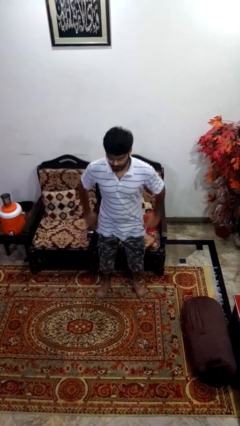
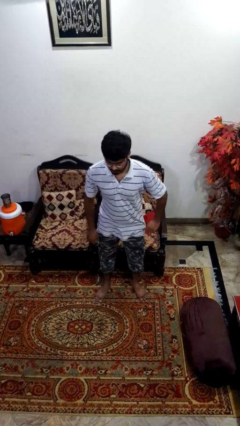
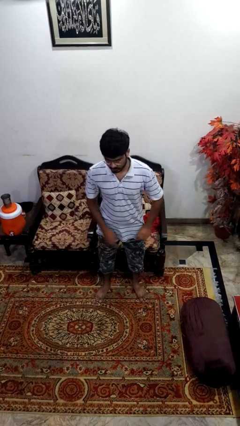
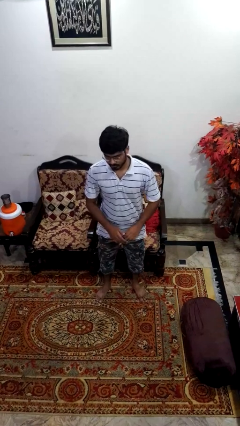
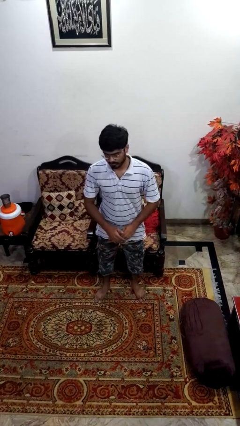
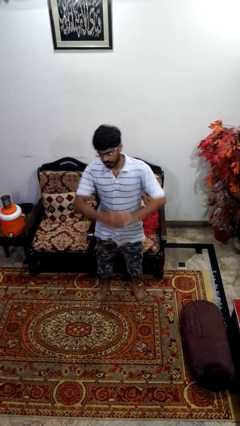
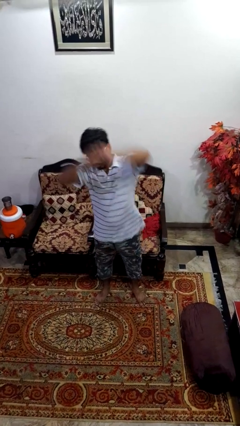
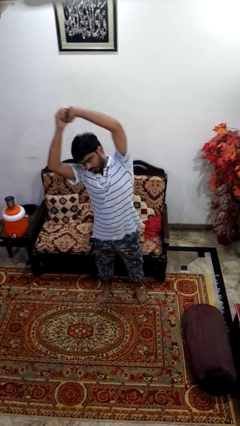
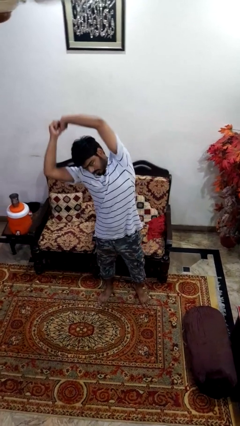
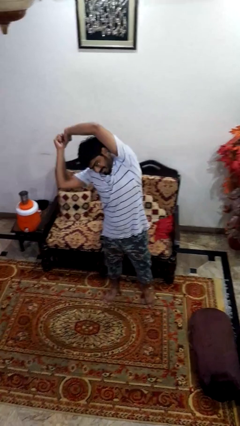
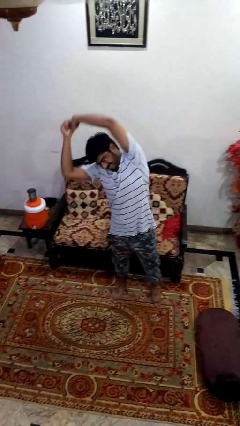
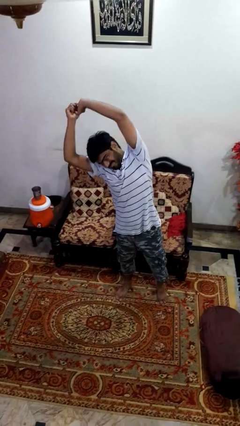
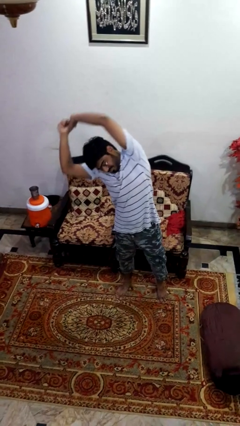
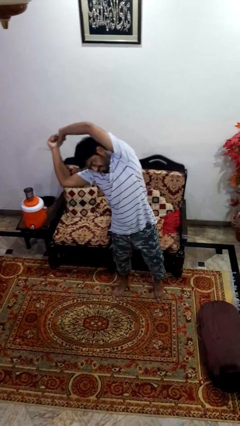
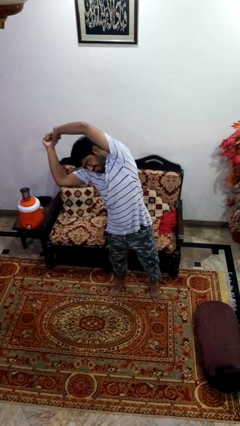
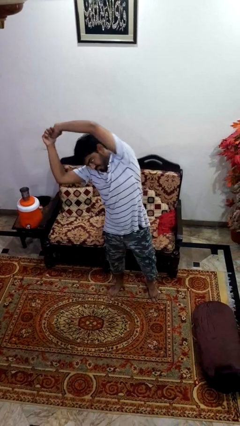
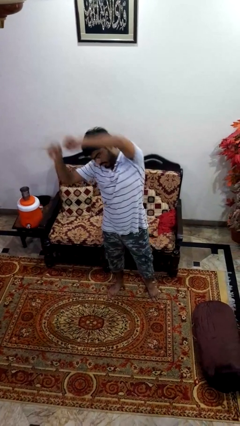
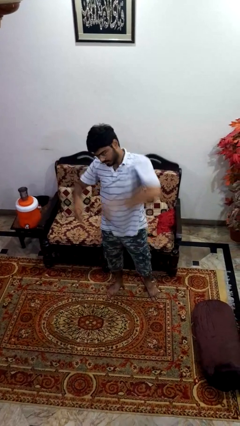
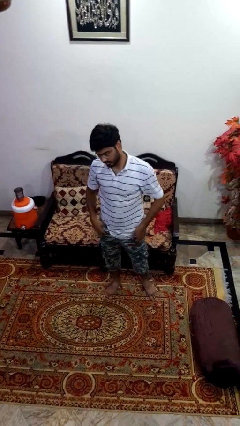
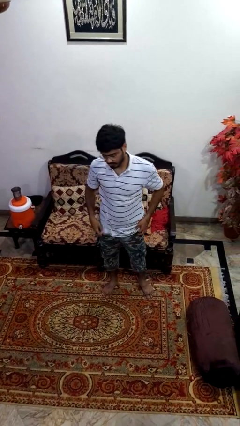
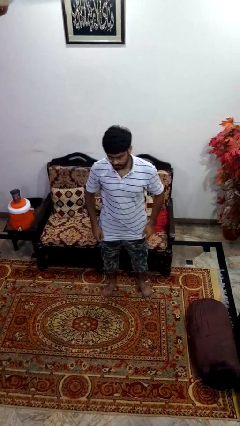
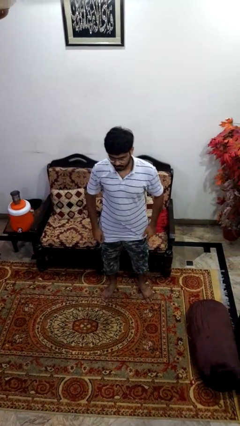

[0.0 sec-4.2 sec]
person stretches arms to side

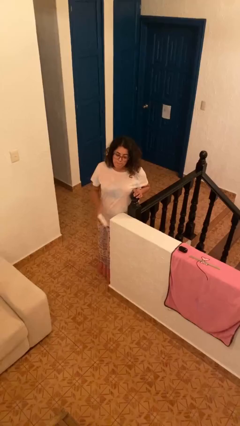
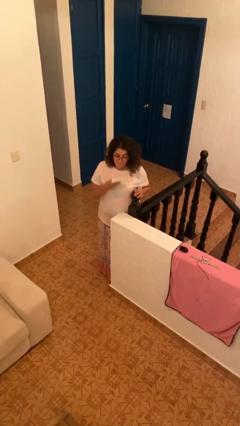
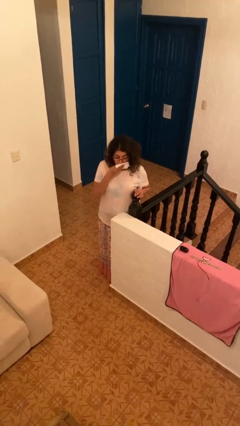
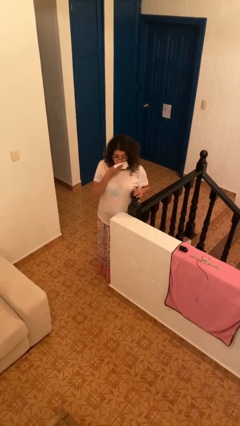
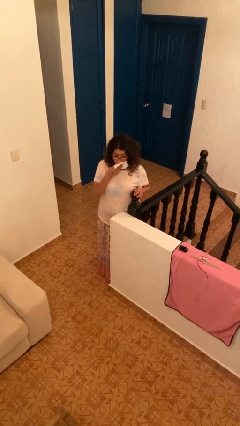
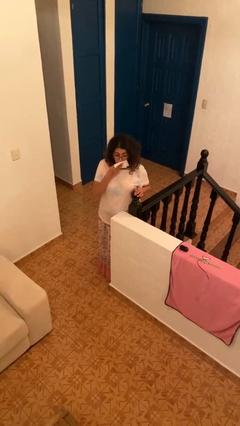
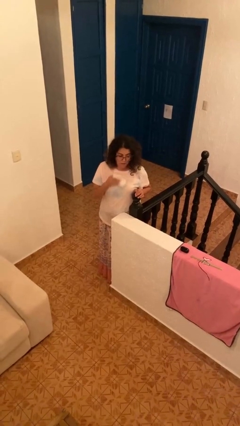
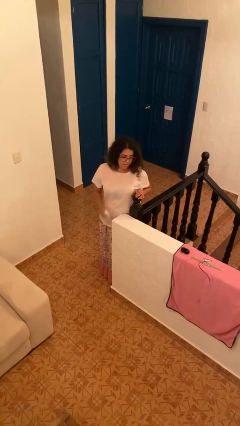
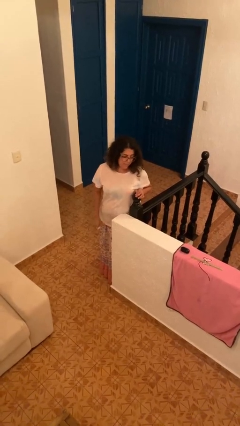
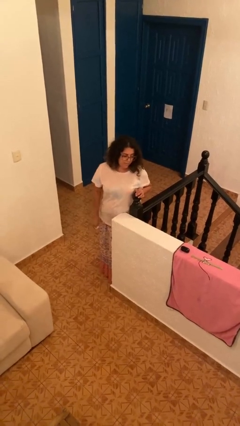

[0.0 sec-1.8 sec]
person wipes mouth with napkin

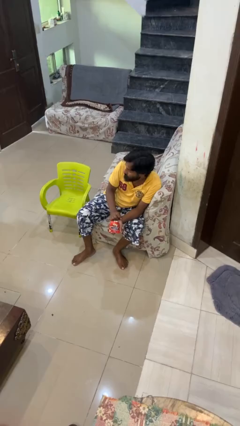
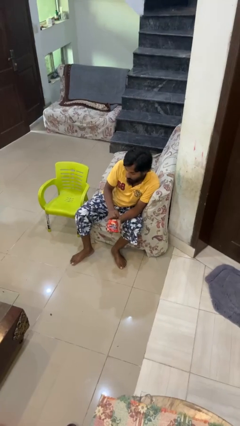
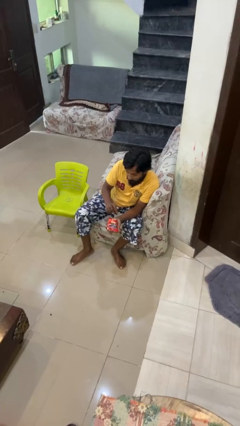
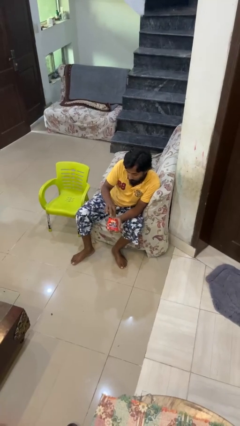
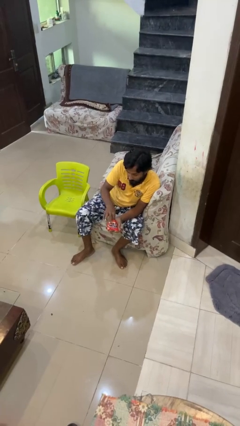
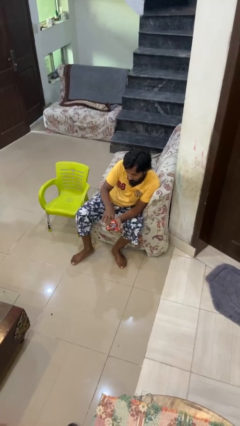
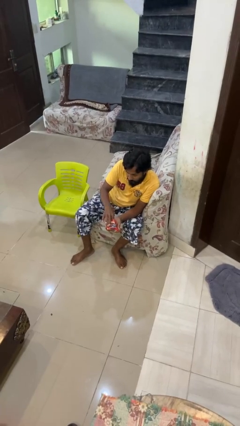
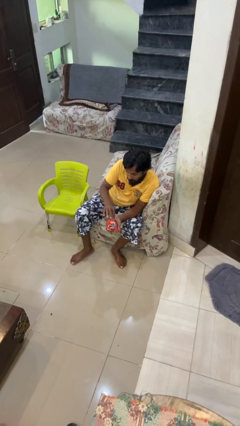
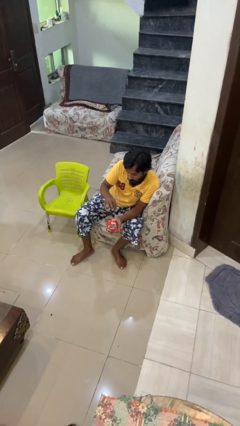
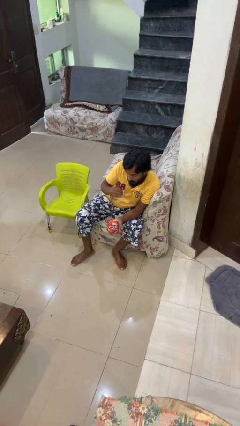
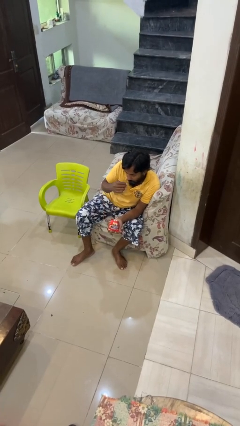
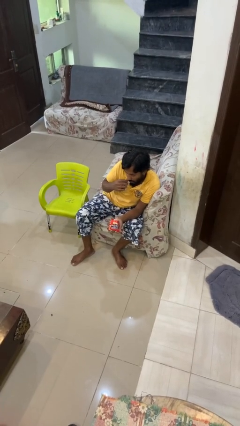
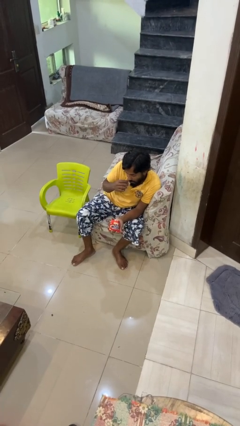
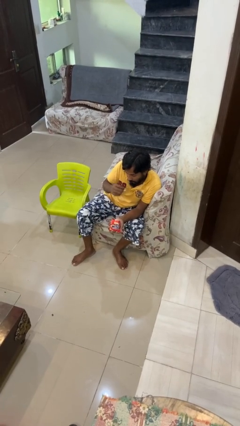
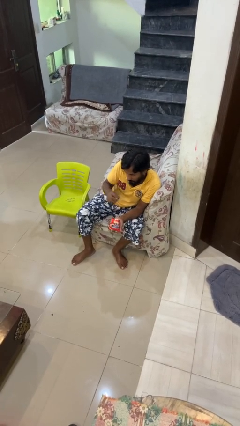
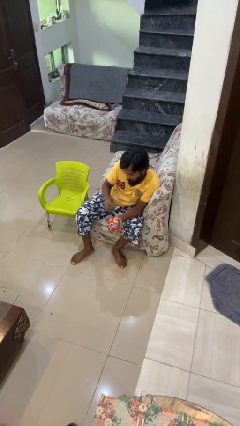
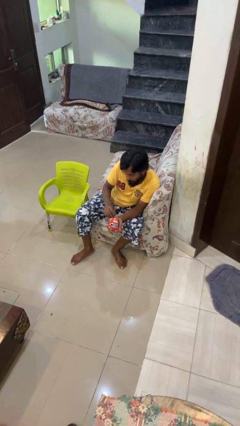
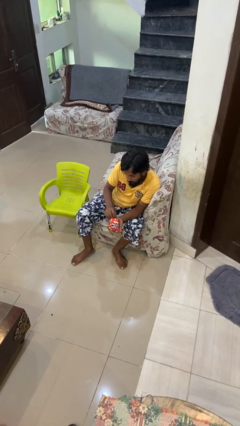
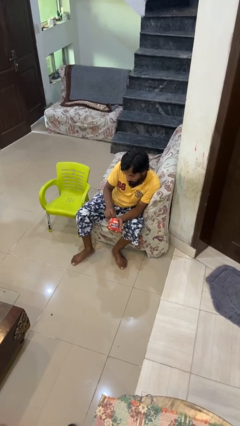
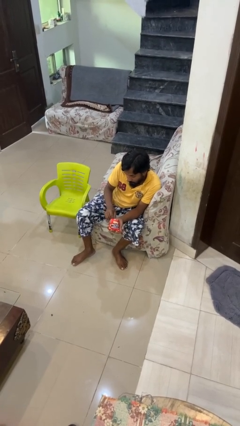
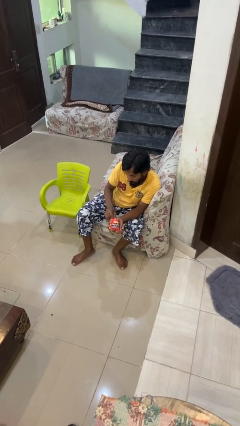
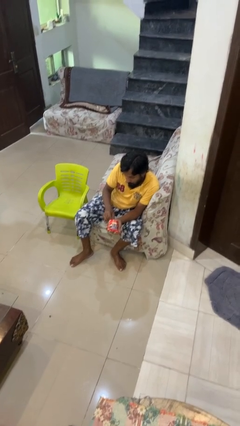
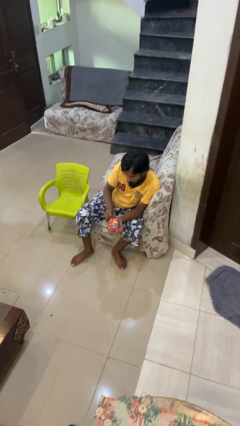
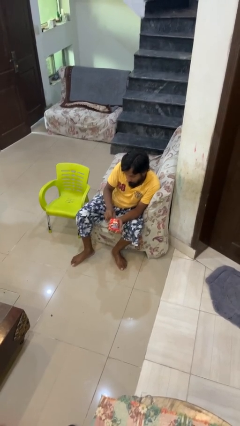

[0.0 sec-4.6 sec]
person eats snack from bag

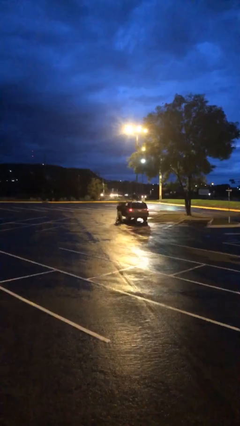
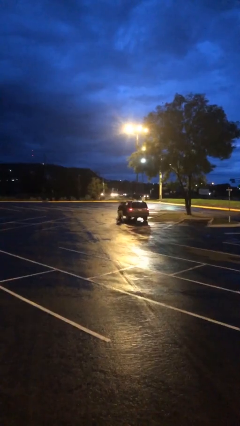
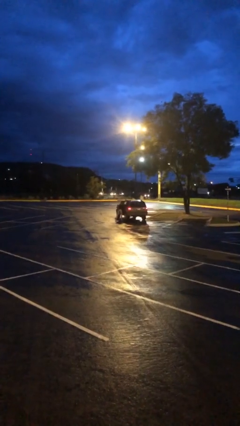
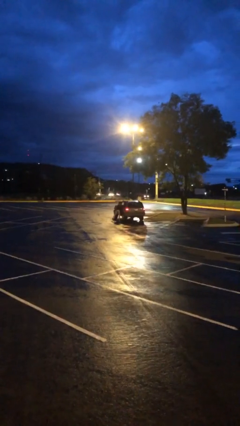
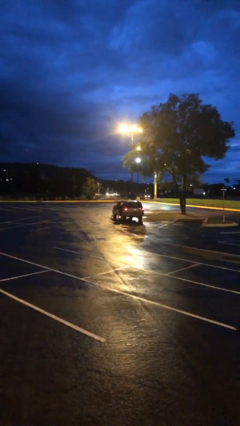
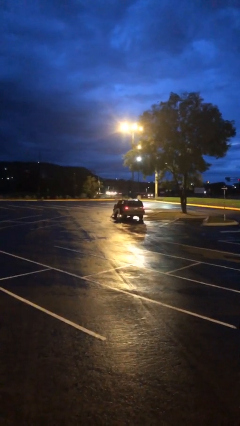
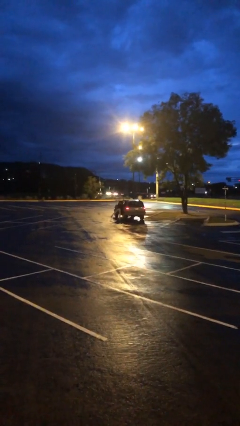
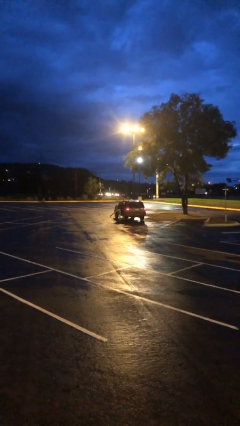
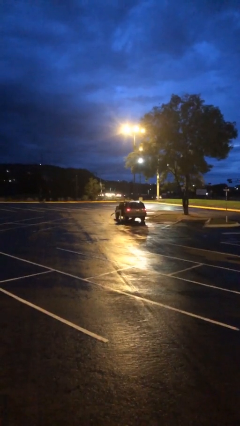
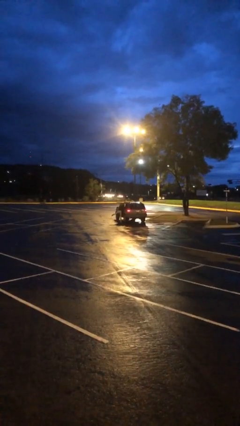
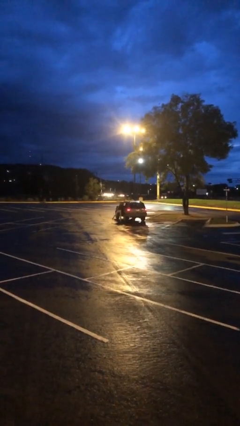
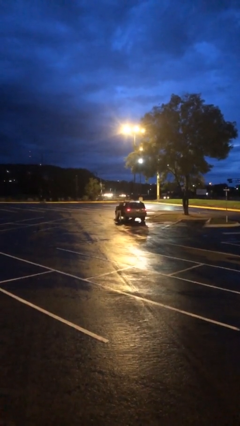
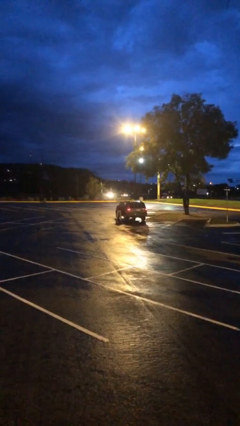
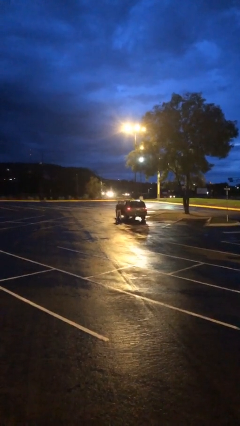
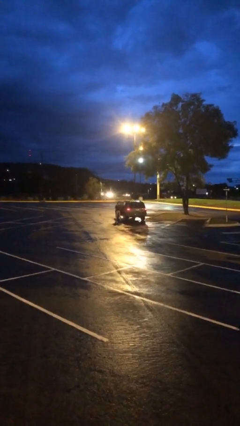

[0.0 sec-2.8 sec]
person unloads car

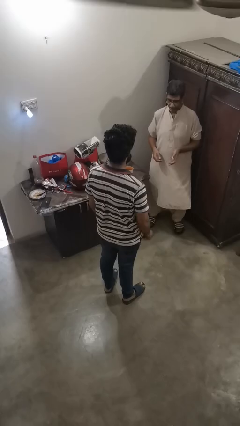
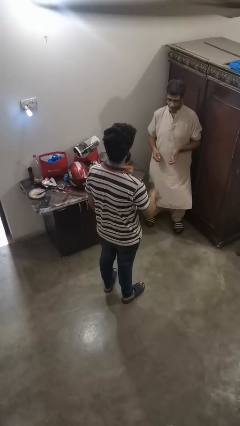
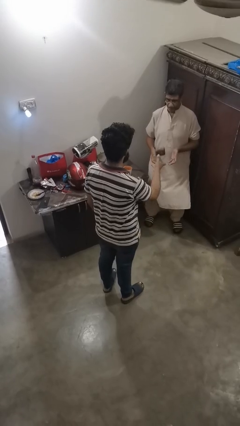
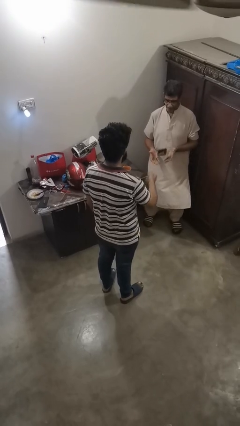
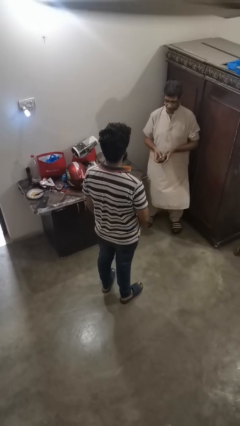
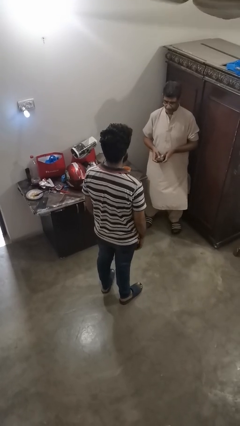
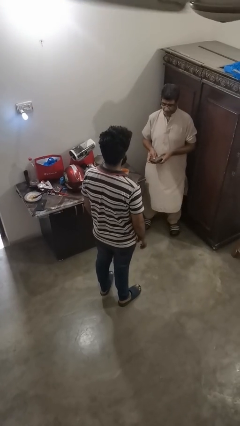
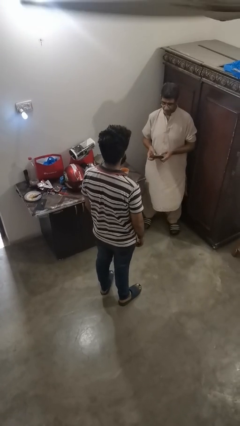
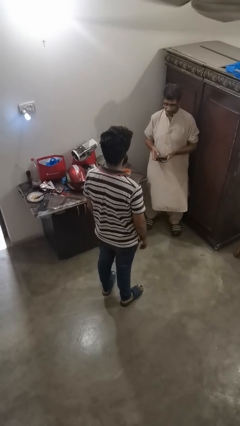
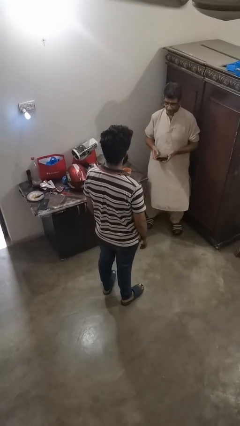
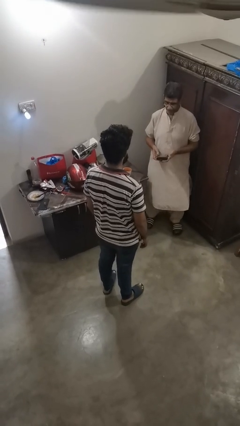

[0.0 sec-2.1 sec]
person throws object to person

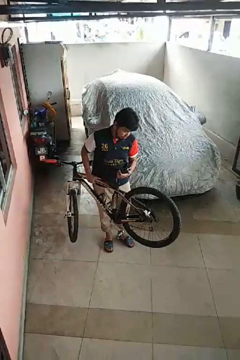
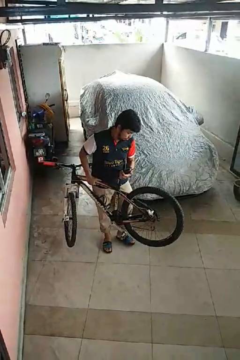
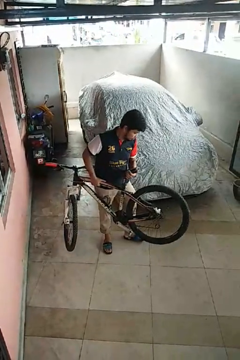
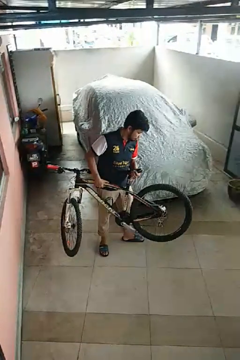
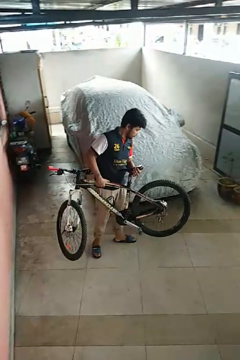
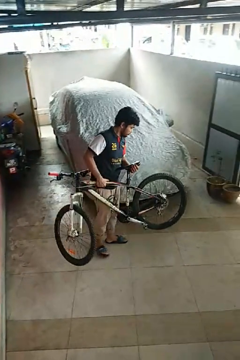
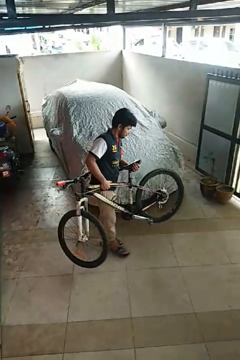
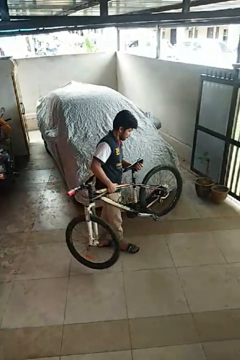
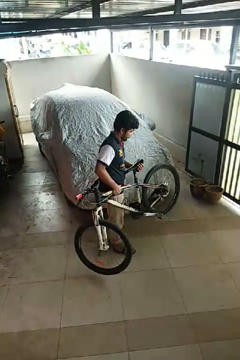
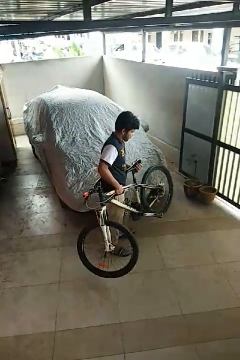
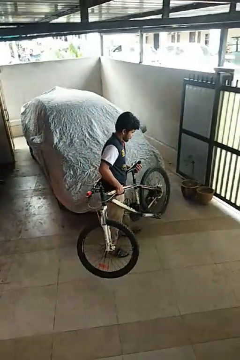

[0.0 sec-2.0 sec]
person carries bicycle
